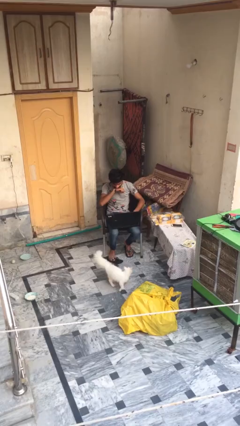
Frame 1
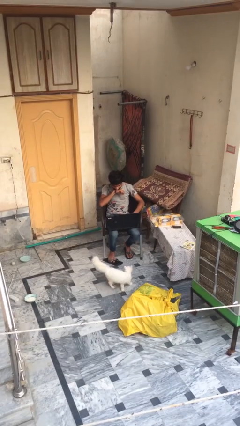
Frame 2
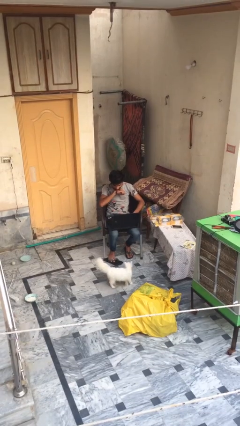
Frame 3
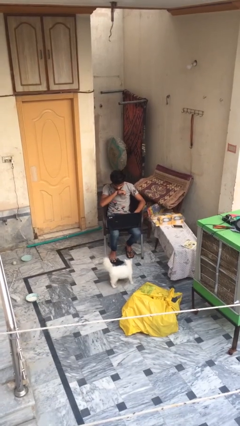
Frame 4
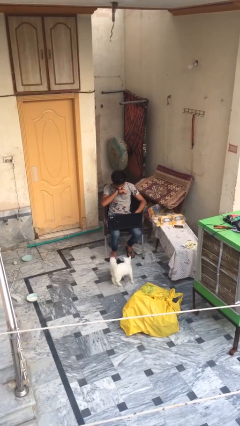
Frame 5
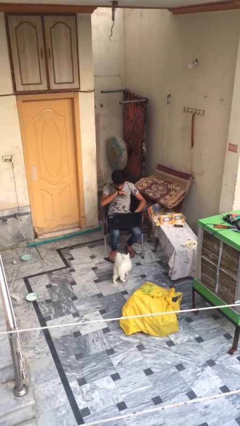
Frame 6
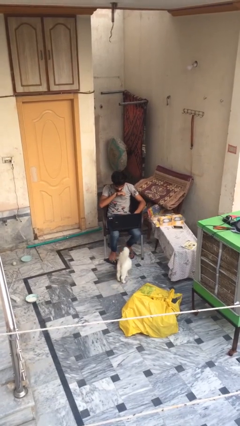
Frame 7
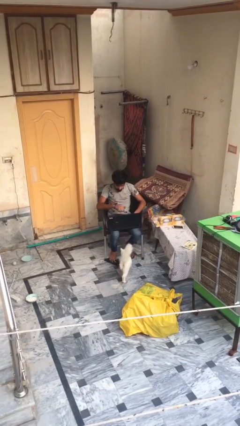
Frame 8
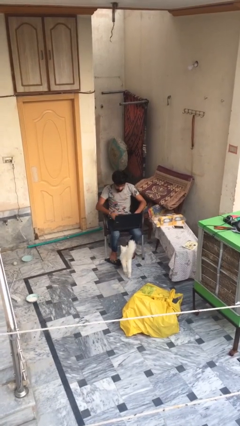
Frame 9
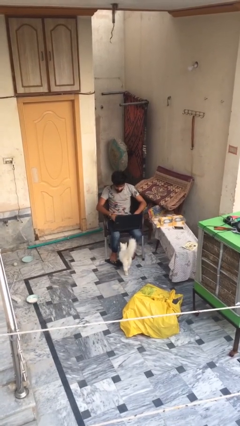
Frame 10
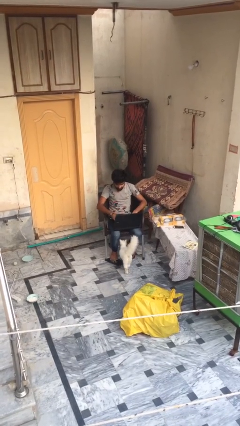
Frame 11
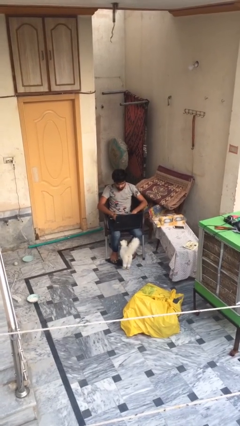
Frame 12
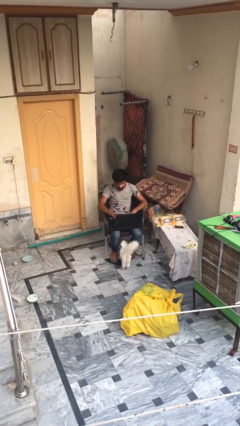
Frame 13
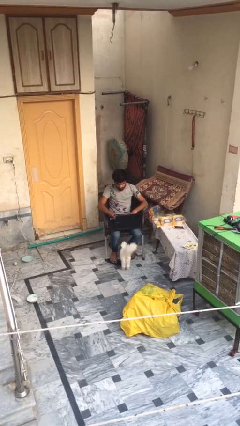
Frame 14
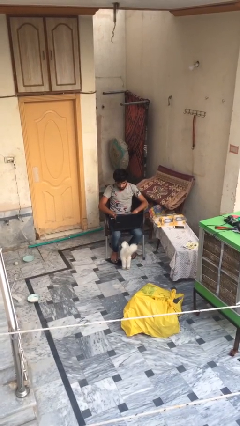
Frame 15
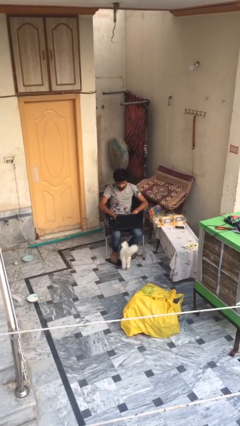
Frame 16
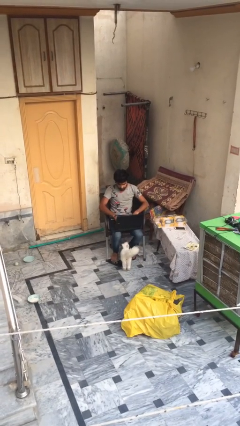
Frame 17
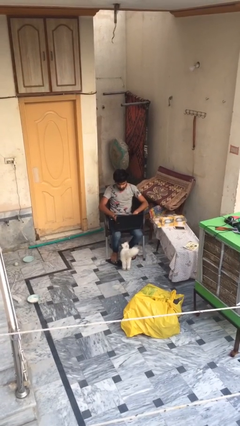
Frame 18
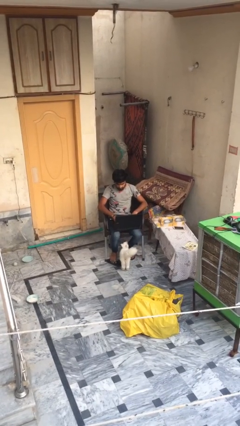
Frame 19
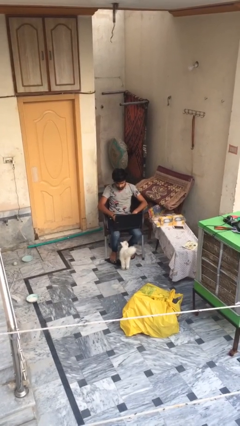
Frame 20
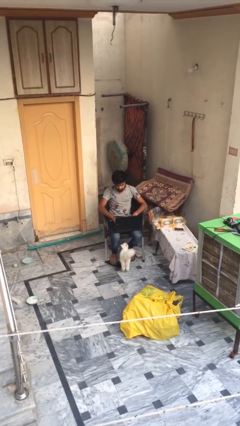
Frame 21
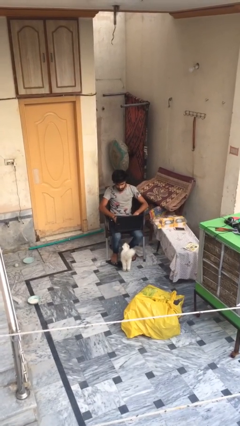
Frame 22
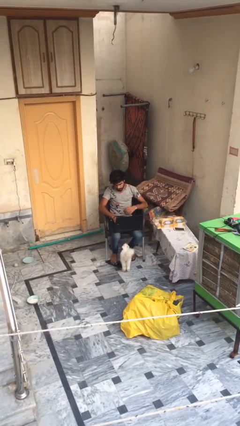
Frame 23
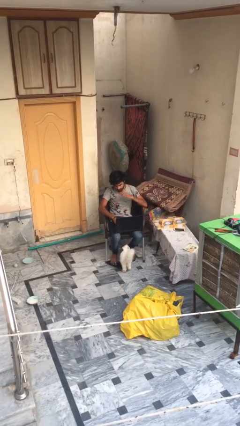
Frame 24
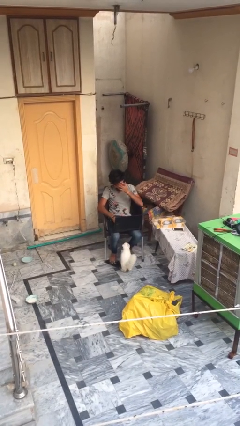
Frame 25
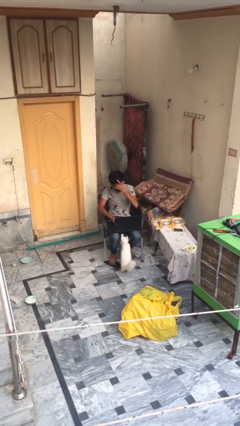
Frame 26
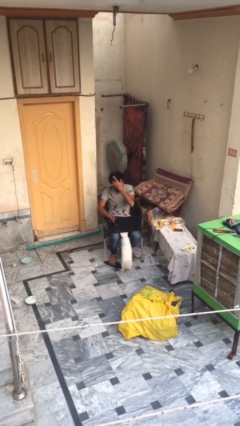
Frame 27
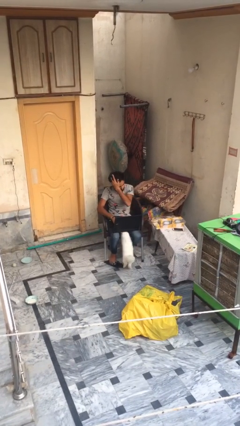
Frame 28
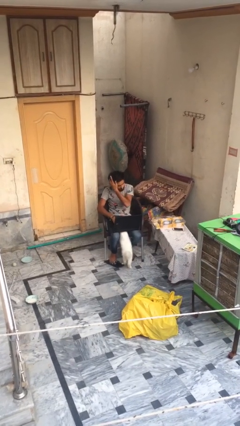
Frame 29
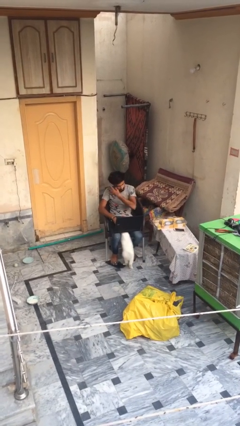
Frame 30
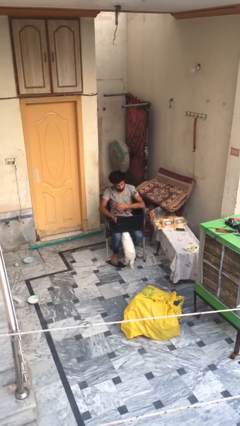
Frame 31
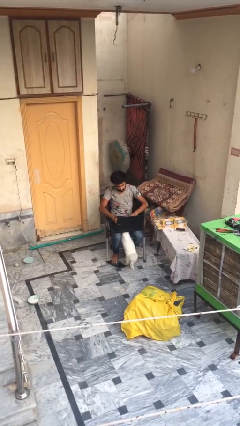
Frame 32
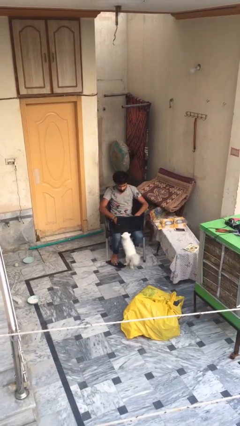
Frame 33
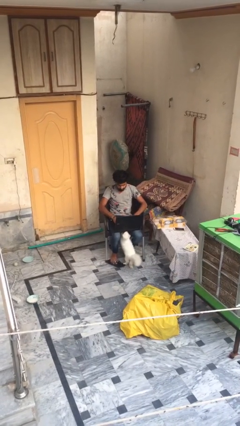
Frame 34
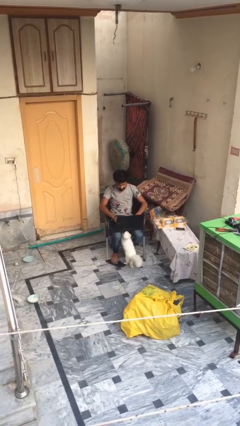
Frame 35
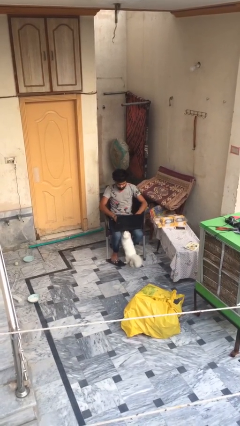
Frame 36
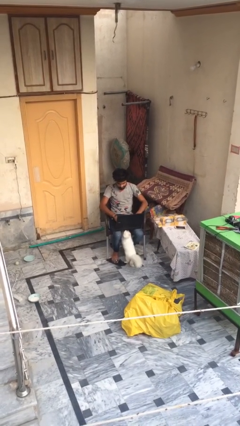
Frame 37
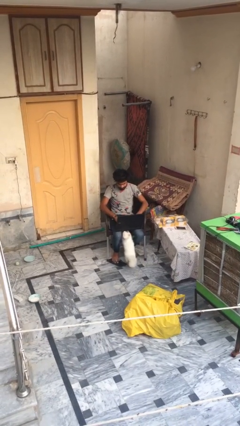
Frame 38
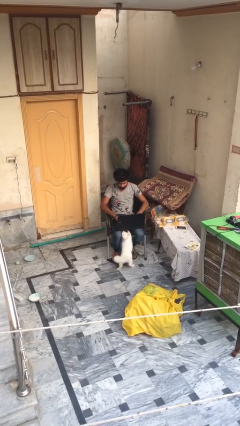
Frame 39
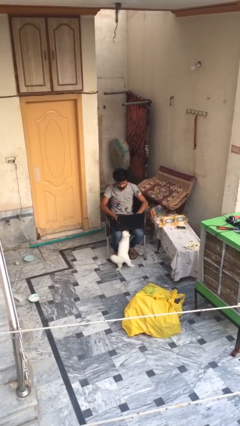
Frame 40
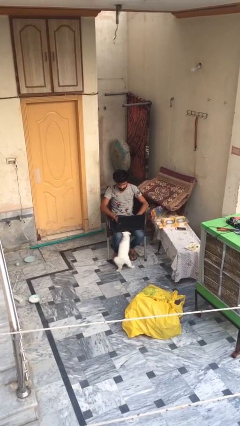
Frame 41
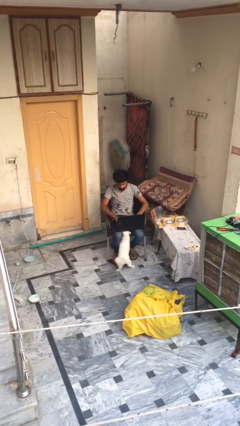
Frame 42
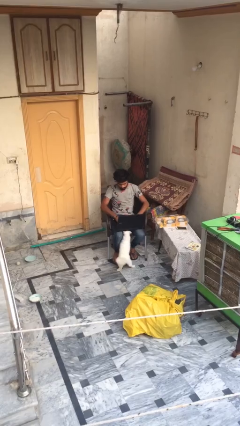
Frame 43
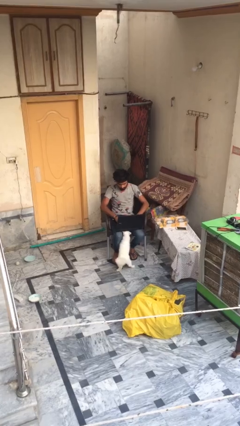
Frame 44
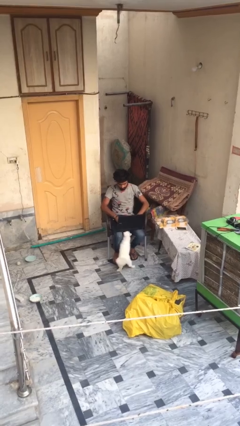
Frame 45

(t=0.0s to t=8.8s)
person interacts with laptop

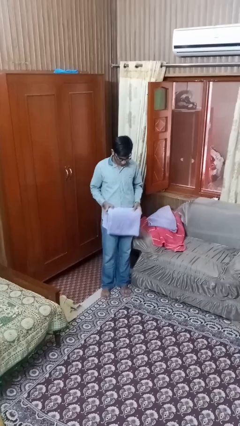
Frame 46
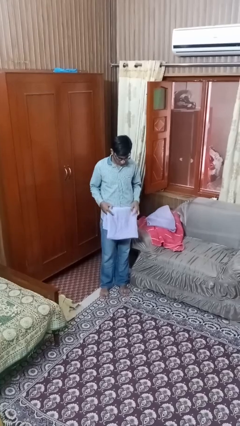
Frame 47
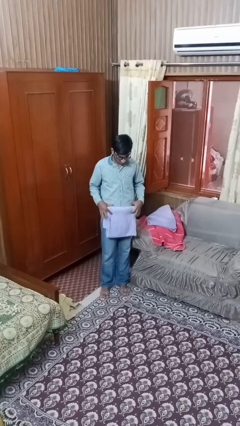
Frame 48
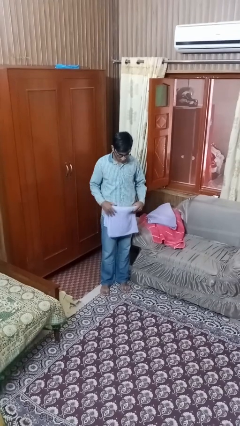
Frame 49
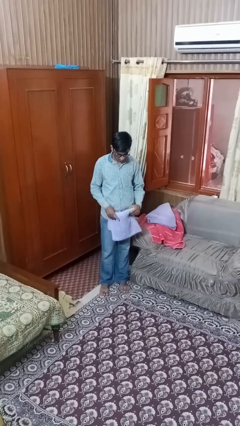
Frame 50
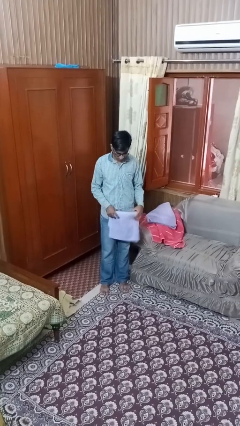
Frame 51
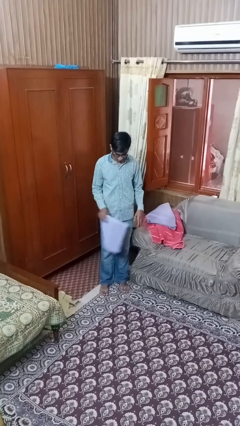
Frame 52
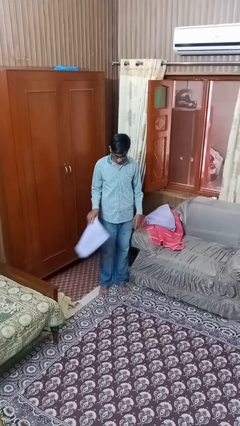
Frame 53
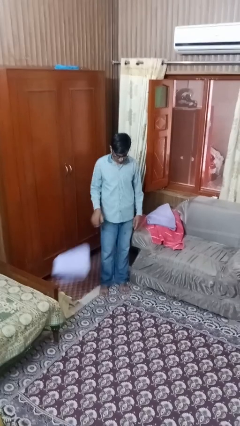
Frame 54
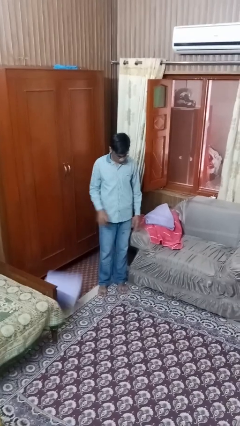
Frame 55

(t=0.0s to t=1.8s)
person folds towel

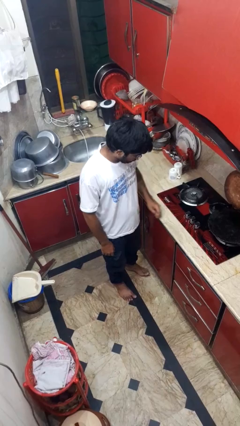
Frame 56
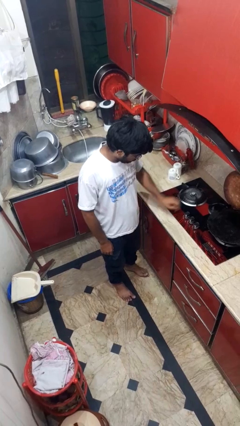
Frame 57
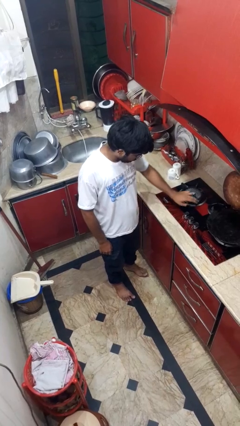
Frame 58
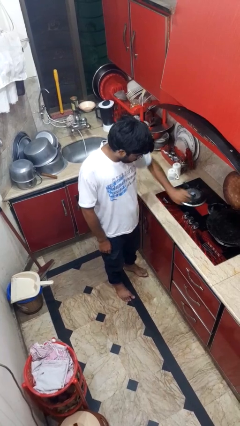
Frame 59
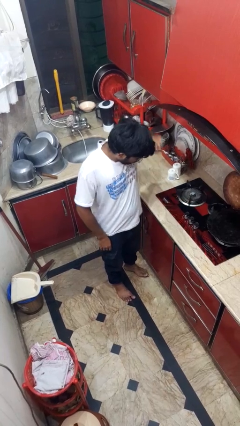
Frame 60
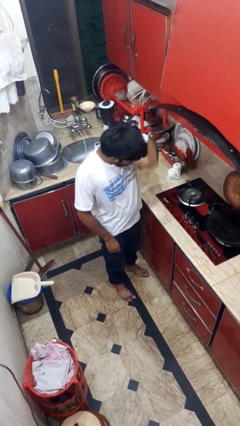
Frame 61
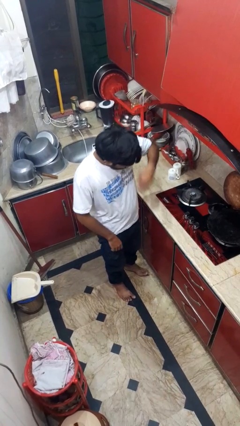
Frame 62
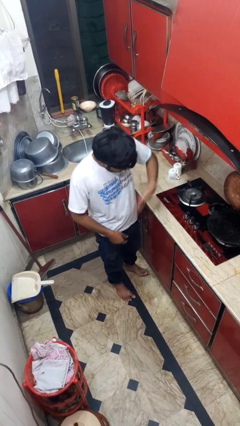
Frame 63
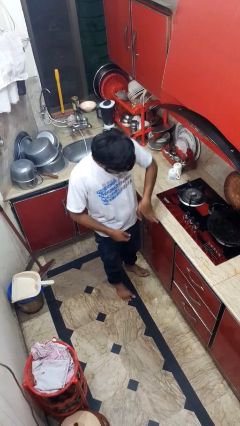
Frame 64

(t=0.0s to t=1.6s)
person burns hand

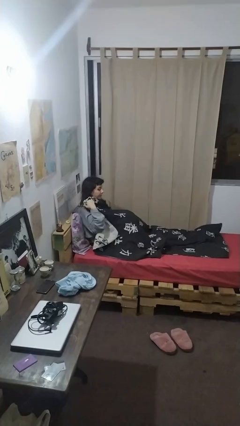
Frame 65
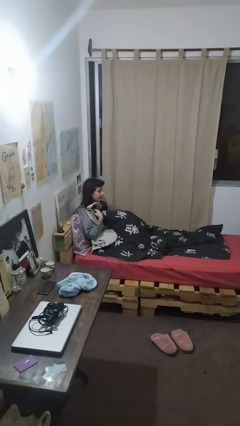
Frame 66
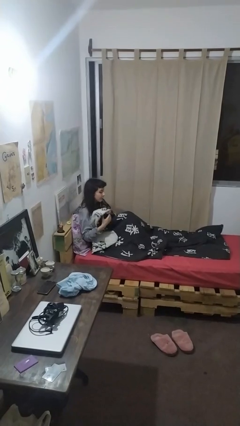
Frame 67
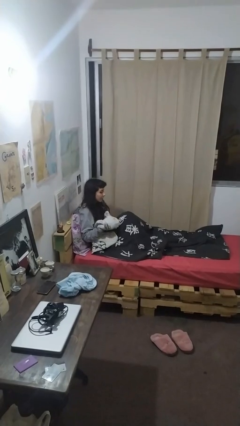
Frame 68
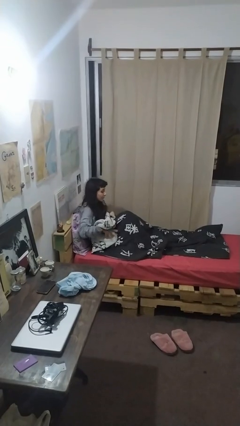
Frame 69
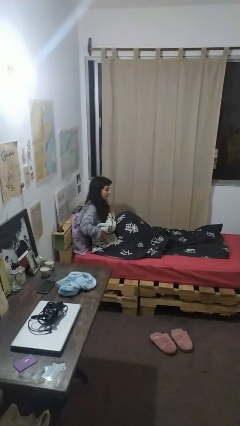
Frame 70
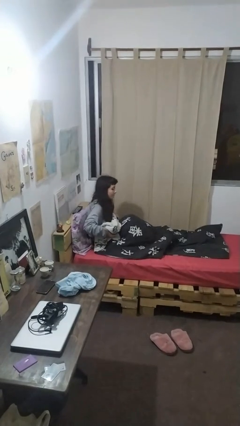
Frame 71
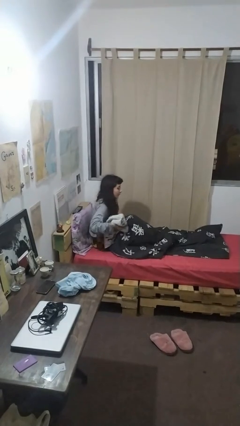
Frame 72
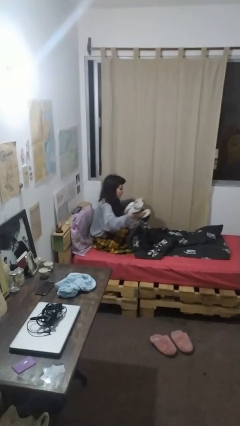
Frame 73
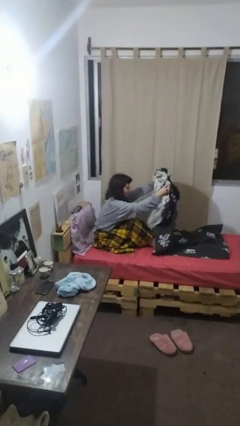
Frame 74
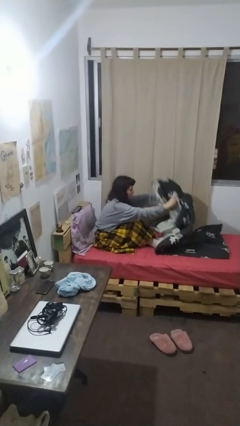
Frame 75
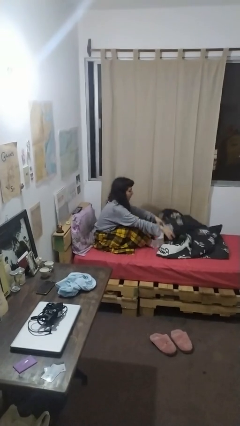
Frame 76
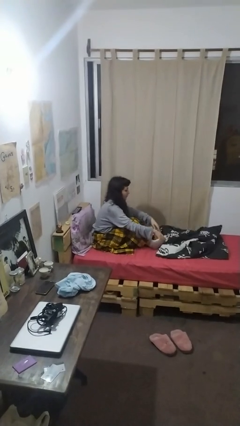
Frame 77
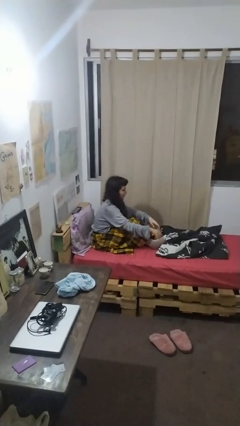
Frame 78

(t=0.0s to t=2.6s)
person uncovers with blanket

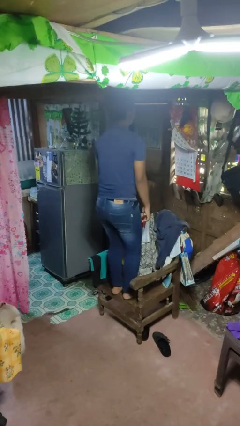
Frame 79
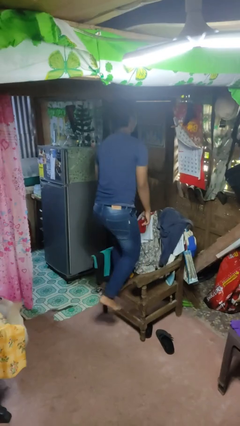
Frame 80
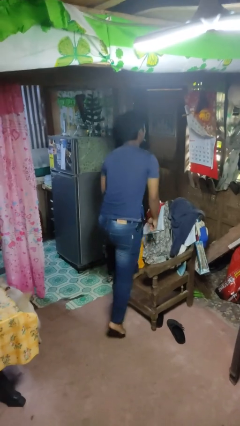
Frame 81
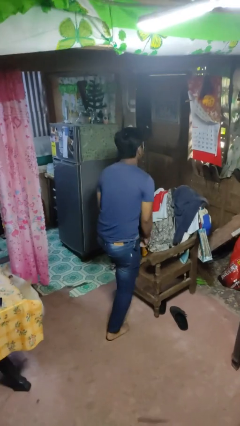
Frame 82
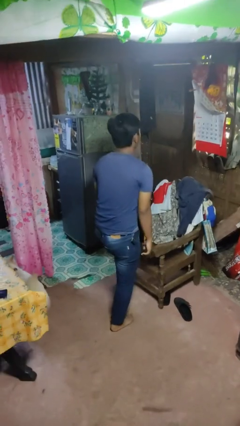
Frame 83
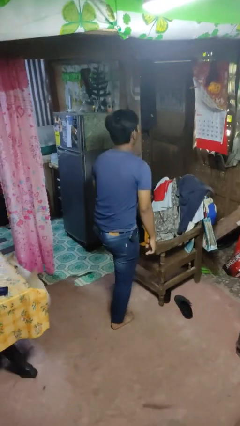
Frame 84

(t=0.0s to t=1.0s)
person climbs off chair

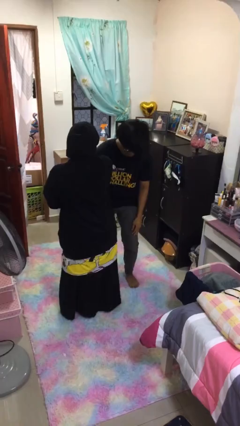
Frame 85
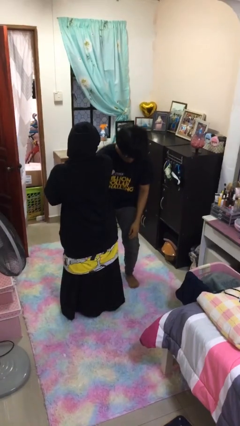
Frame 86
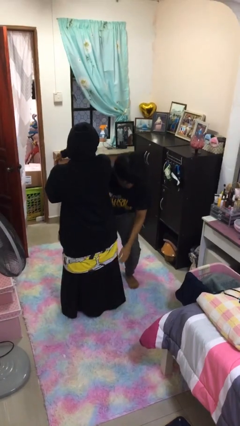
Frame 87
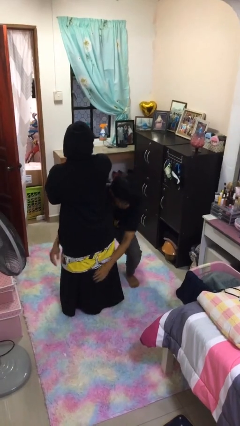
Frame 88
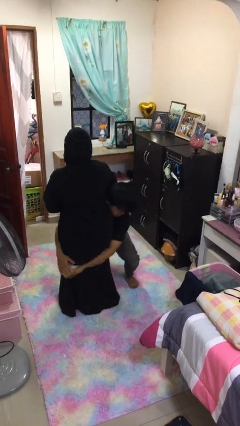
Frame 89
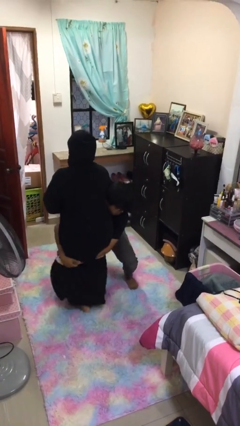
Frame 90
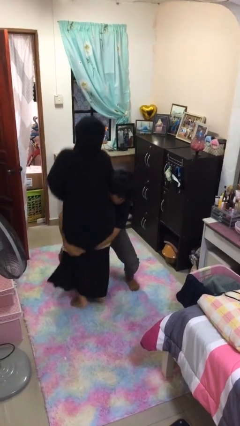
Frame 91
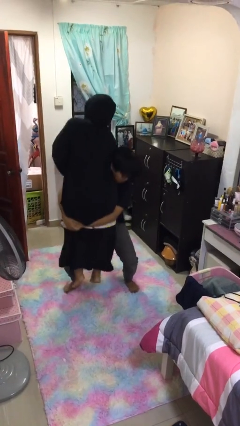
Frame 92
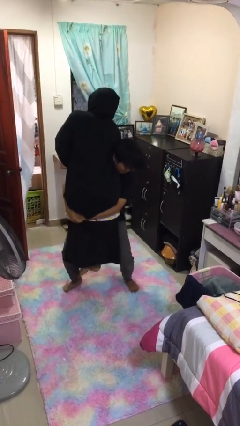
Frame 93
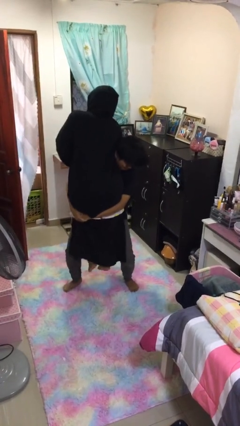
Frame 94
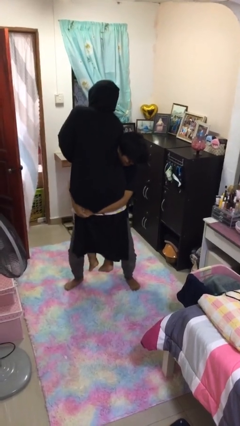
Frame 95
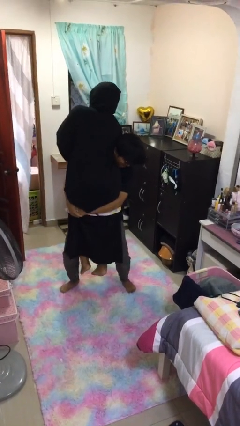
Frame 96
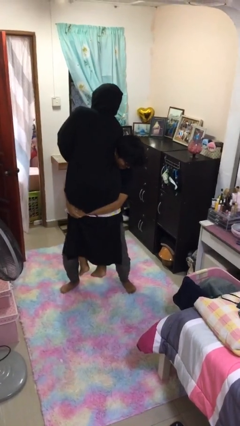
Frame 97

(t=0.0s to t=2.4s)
person picks up person
